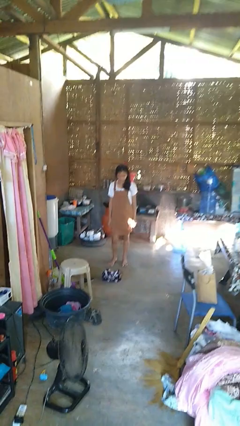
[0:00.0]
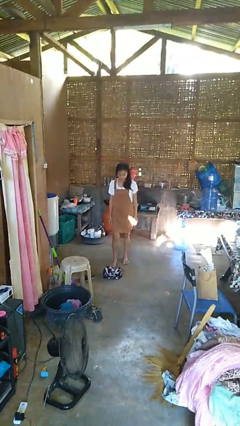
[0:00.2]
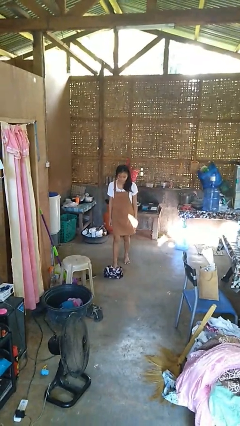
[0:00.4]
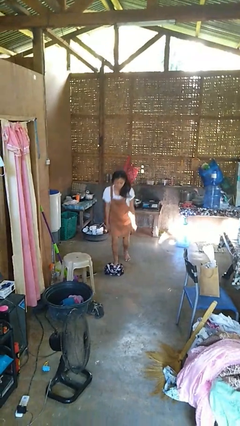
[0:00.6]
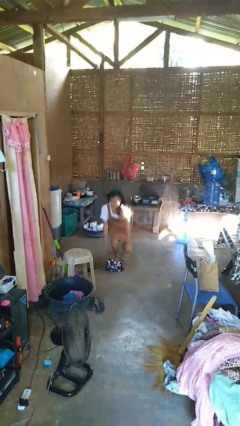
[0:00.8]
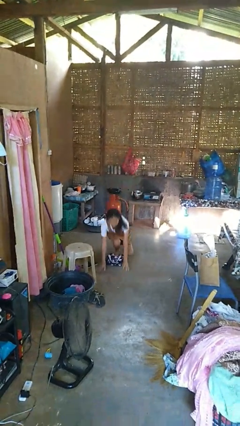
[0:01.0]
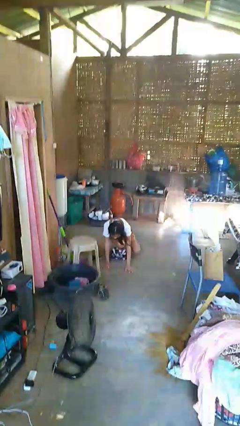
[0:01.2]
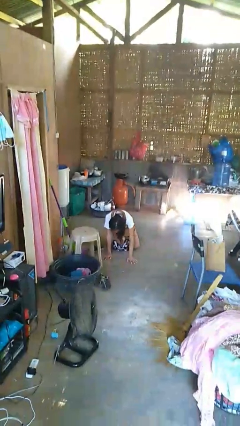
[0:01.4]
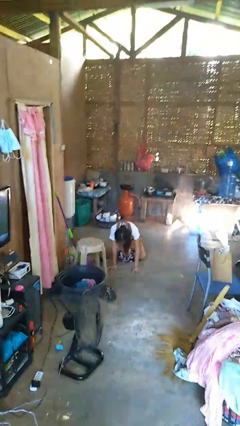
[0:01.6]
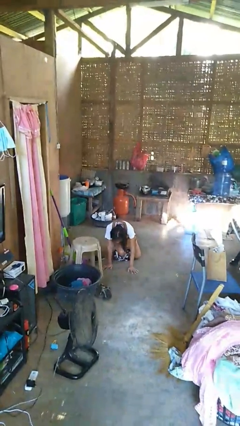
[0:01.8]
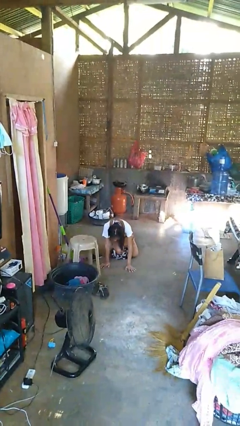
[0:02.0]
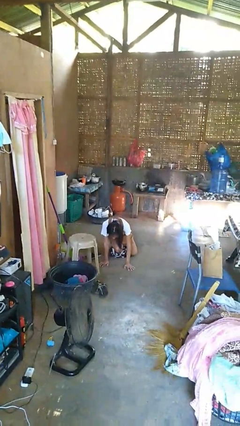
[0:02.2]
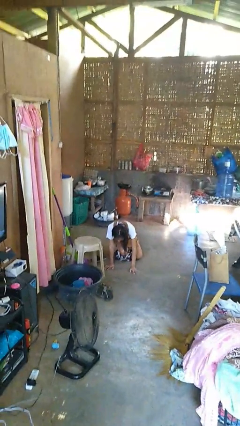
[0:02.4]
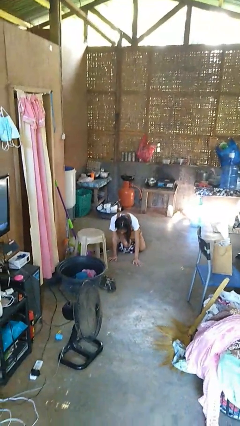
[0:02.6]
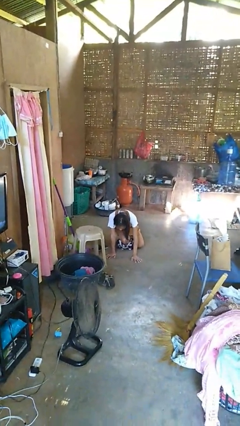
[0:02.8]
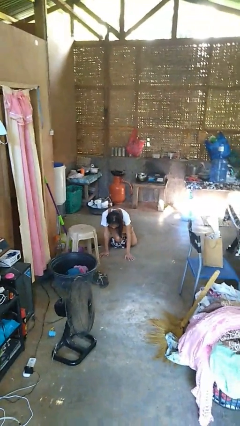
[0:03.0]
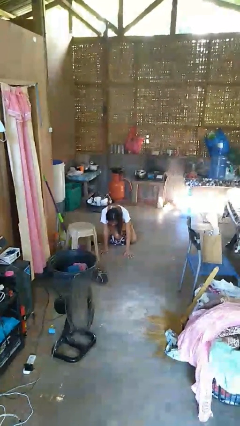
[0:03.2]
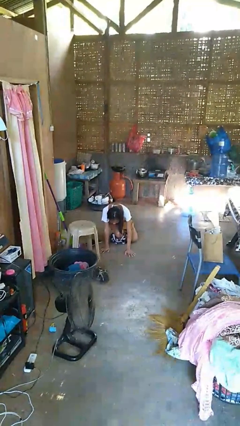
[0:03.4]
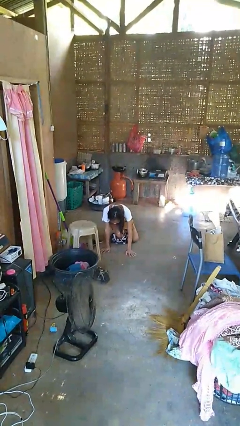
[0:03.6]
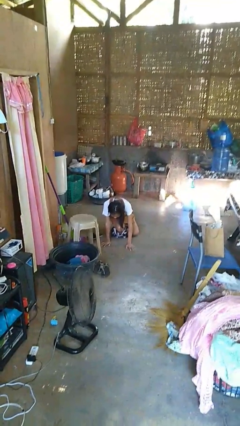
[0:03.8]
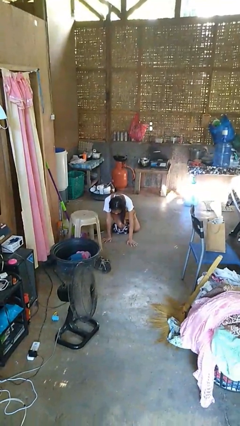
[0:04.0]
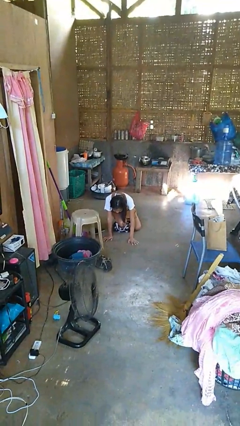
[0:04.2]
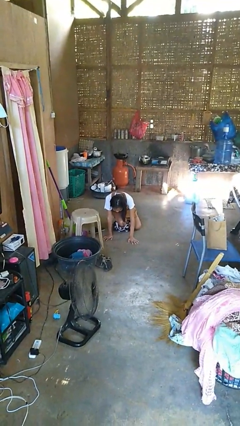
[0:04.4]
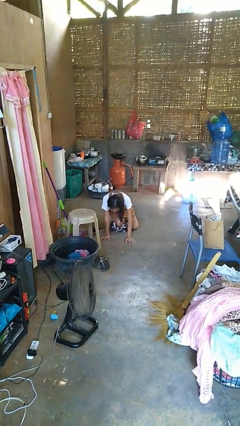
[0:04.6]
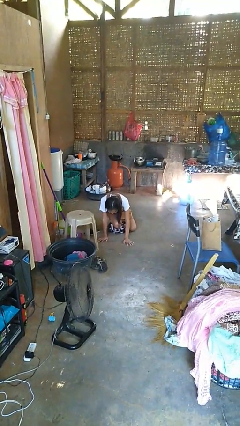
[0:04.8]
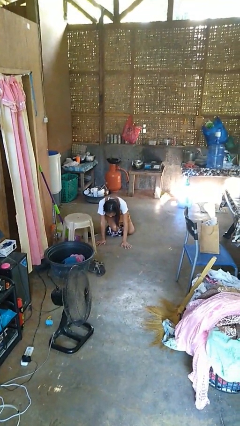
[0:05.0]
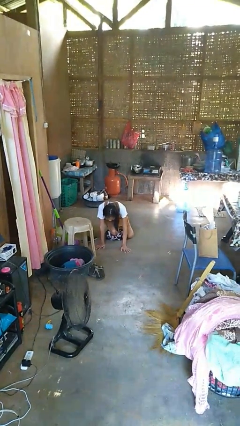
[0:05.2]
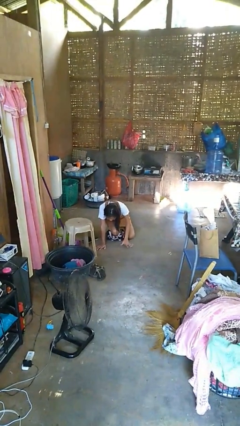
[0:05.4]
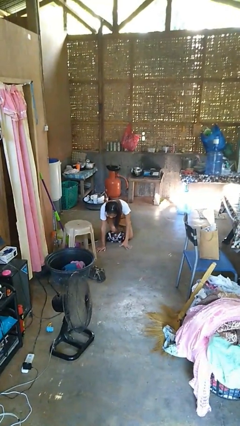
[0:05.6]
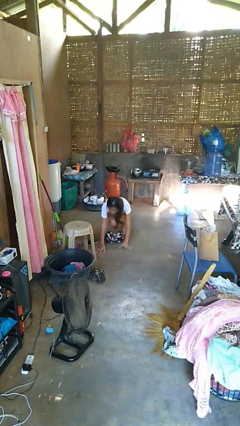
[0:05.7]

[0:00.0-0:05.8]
person trips on object on floor

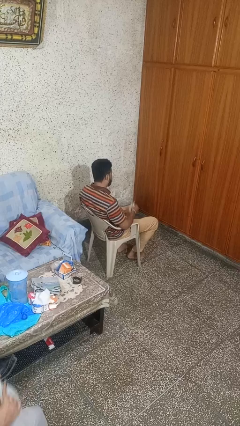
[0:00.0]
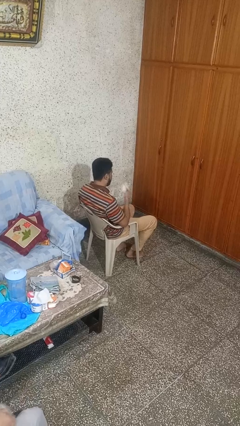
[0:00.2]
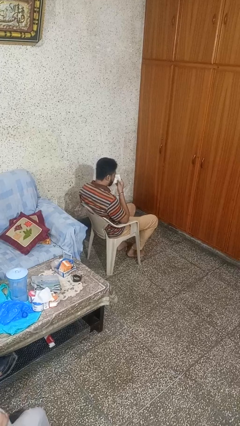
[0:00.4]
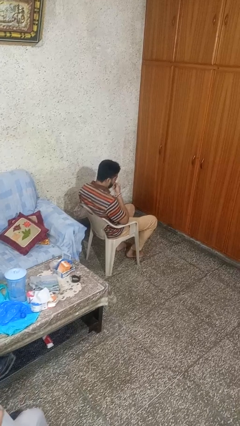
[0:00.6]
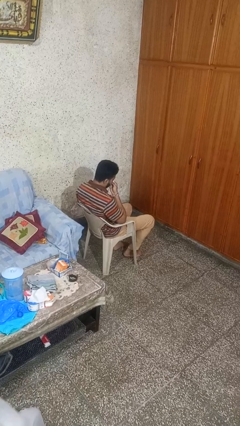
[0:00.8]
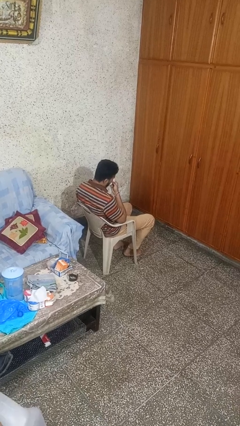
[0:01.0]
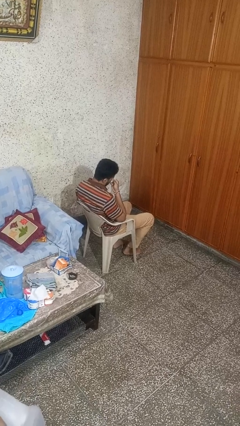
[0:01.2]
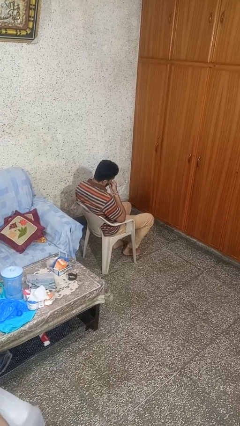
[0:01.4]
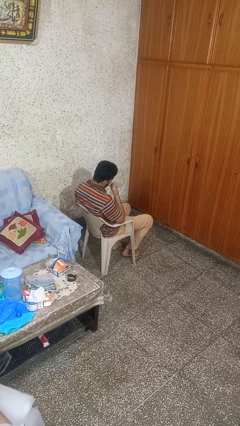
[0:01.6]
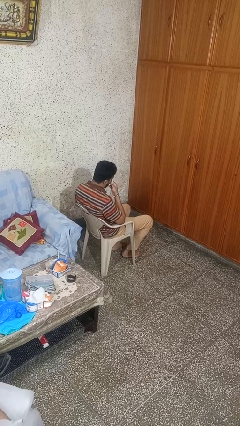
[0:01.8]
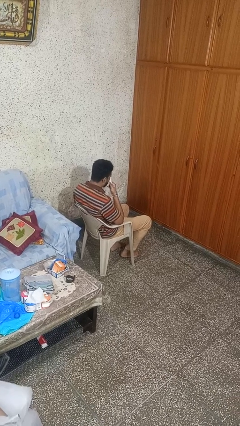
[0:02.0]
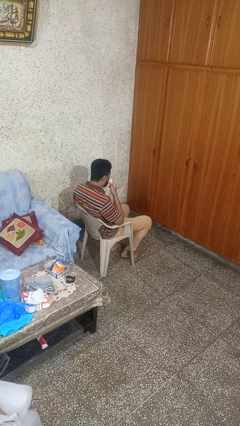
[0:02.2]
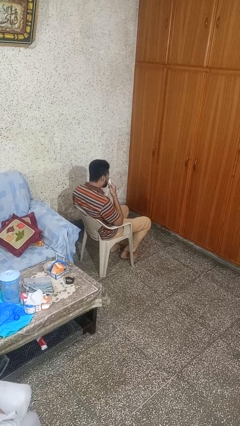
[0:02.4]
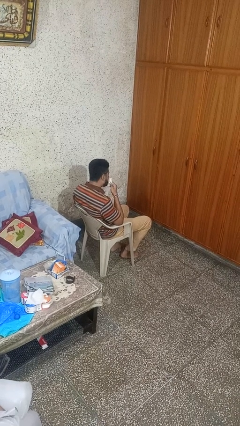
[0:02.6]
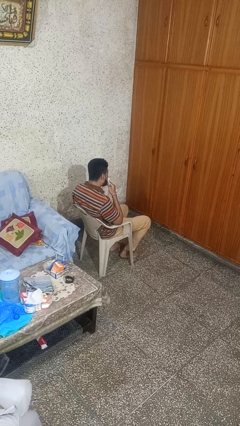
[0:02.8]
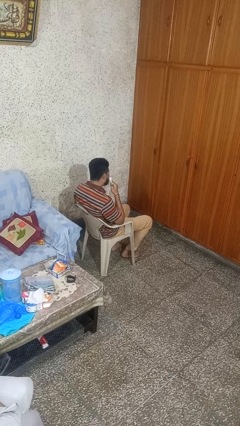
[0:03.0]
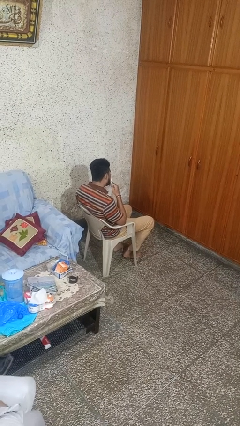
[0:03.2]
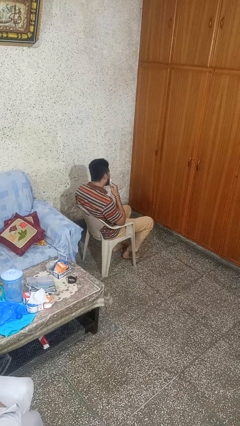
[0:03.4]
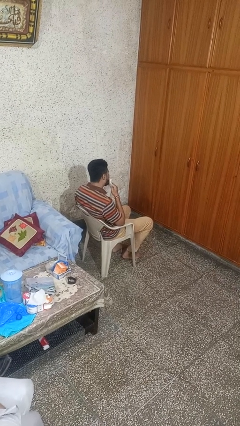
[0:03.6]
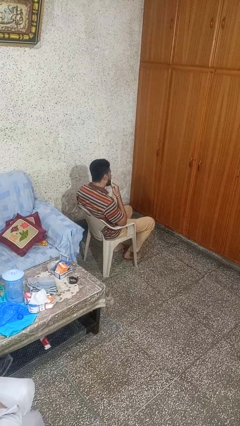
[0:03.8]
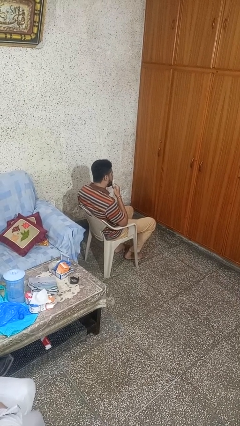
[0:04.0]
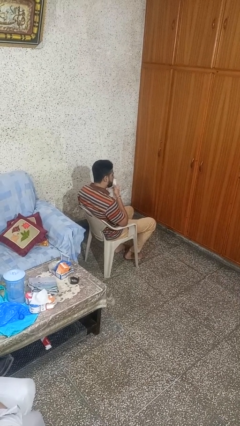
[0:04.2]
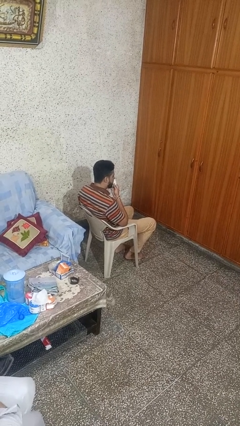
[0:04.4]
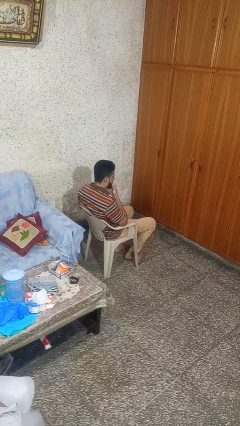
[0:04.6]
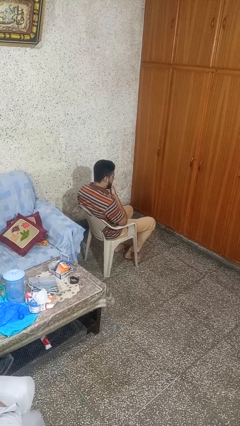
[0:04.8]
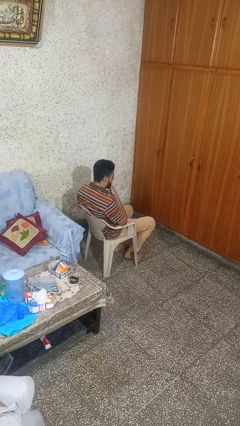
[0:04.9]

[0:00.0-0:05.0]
person wipes mouth with napkin

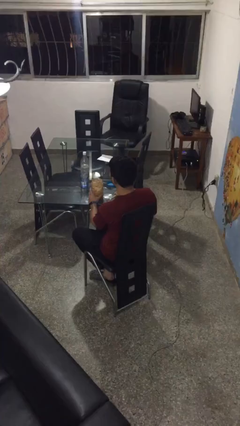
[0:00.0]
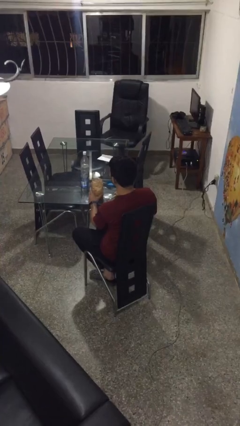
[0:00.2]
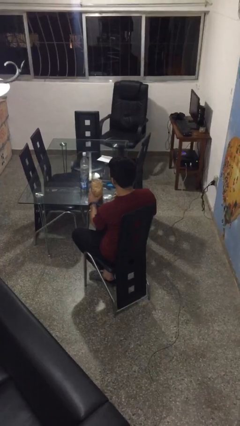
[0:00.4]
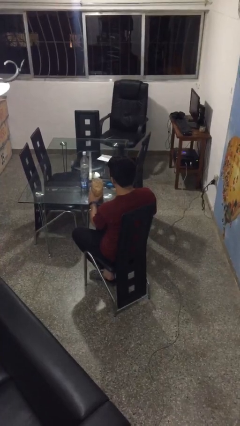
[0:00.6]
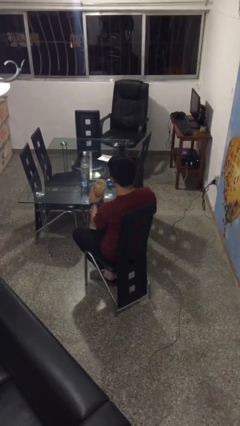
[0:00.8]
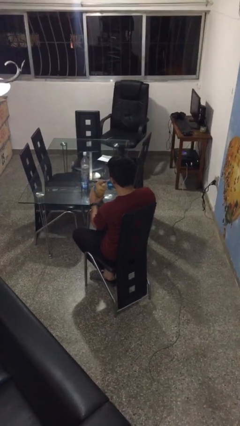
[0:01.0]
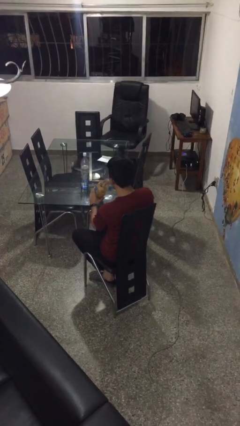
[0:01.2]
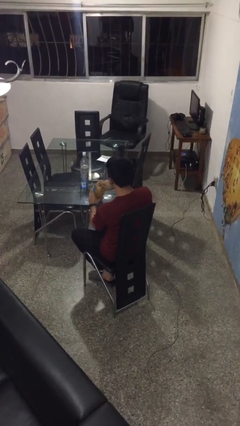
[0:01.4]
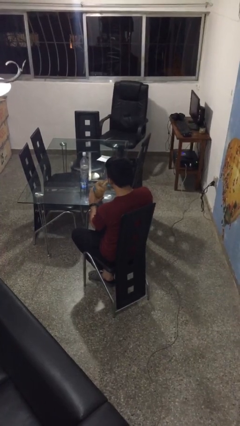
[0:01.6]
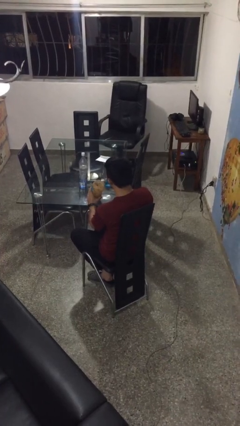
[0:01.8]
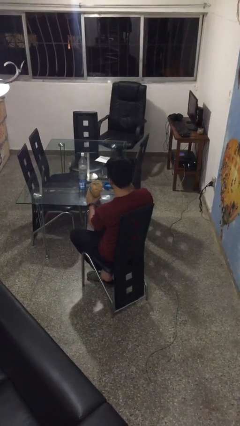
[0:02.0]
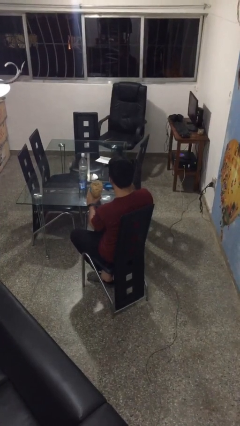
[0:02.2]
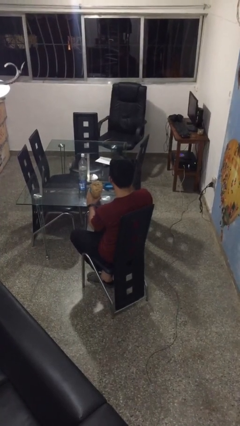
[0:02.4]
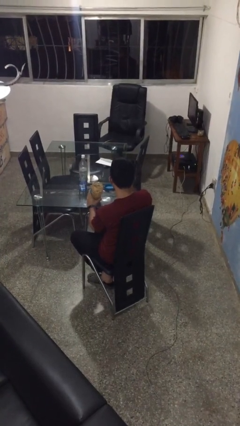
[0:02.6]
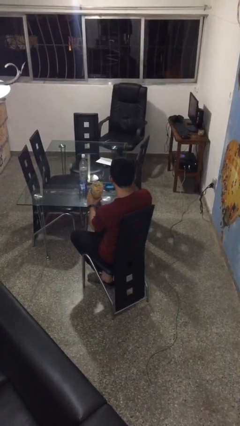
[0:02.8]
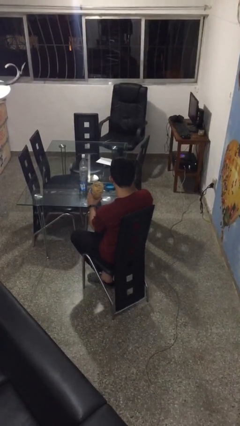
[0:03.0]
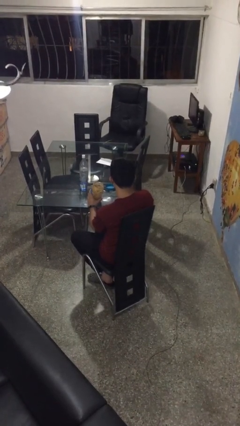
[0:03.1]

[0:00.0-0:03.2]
person eats with utensil

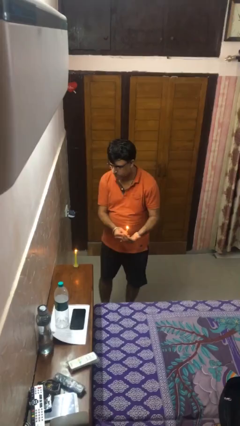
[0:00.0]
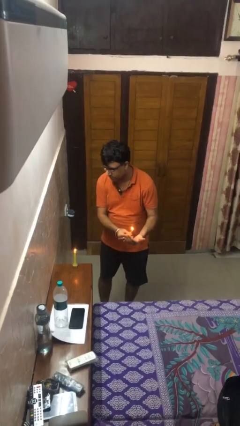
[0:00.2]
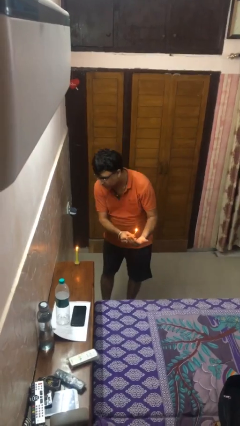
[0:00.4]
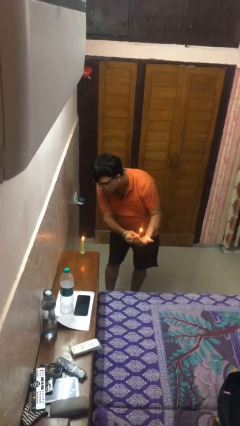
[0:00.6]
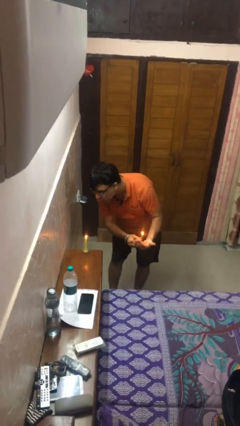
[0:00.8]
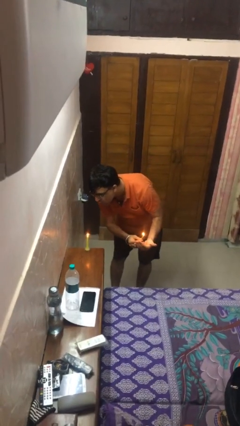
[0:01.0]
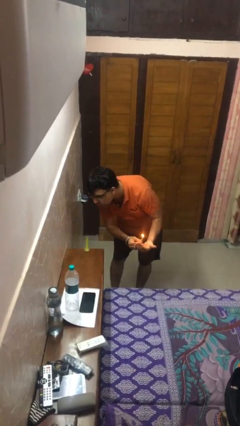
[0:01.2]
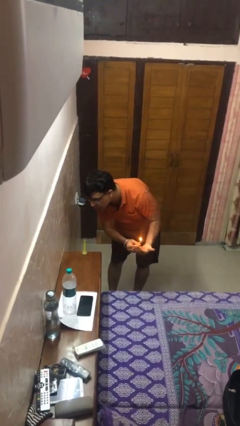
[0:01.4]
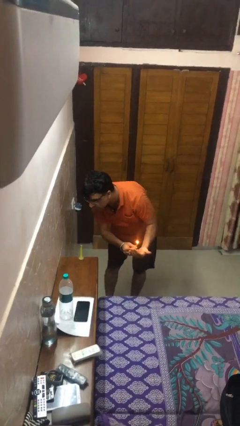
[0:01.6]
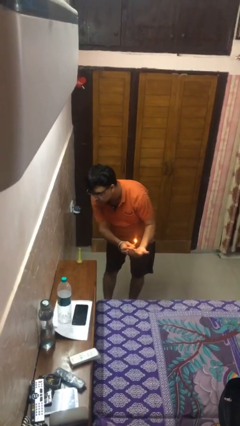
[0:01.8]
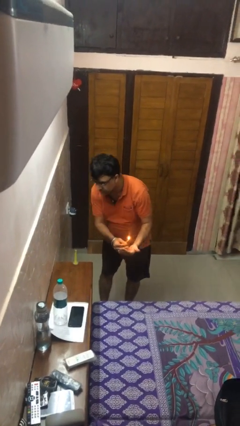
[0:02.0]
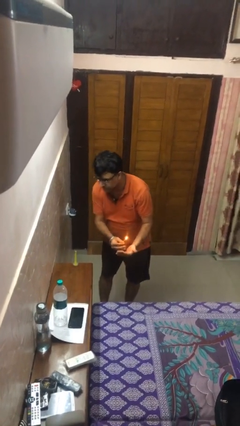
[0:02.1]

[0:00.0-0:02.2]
person extinguishes candle

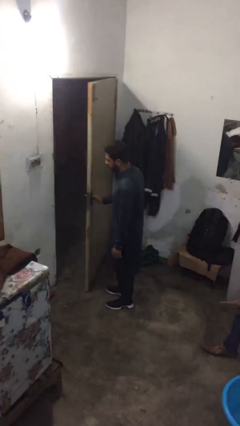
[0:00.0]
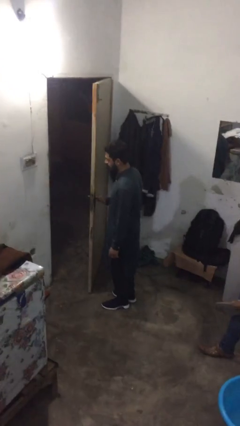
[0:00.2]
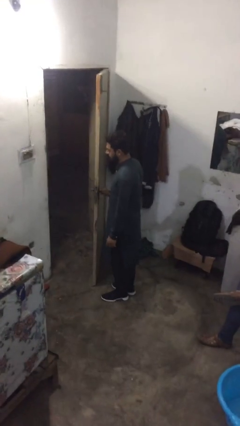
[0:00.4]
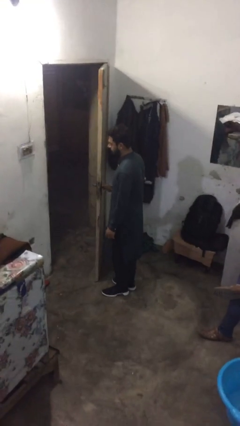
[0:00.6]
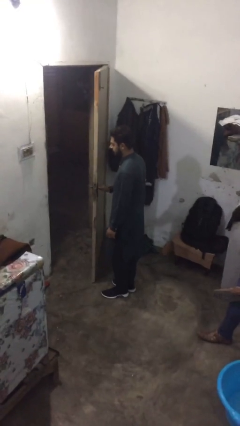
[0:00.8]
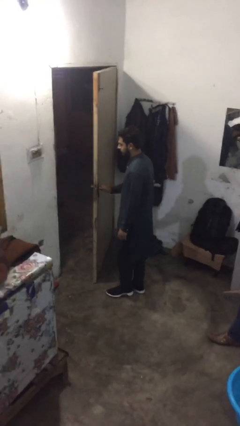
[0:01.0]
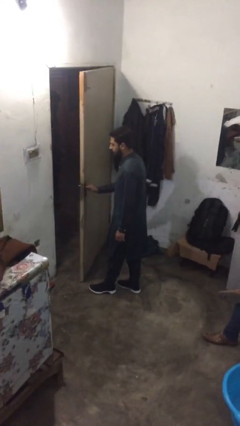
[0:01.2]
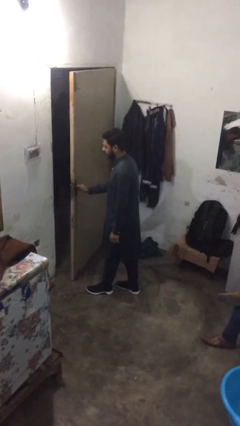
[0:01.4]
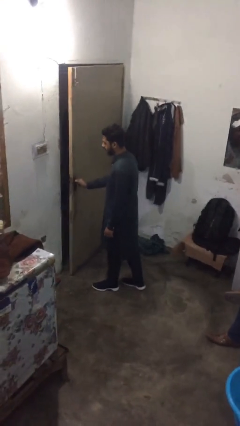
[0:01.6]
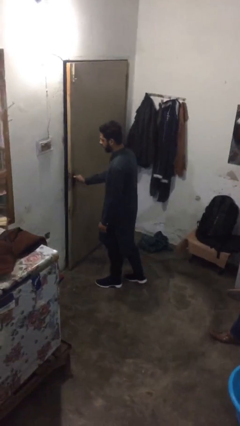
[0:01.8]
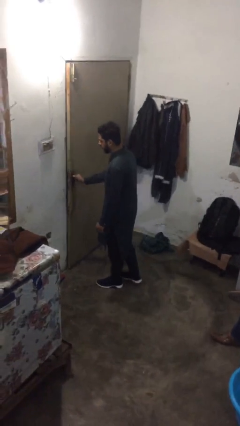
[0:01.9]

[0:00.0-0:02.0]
person closes facility door
